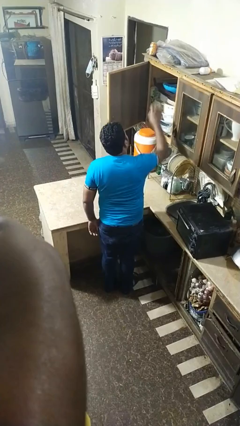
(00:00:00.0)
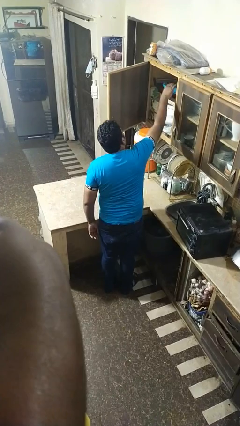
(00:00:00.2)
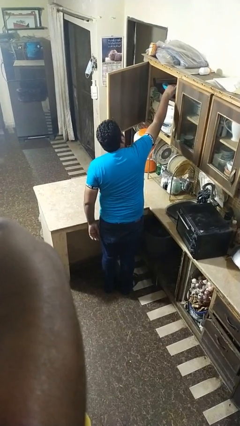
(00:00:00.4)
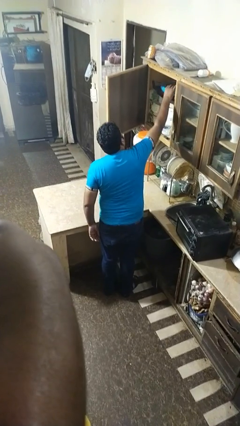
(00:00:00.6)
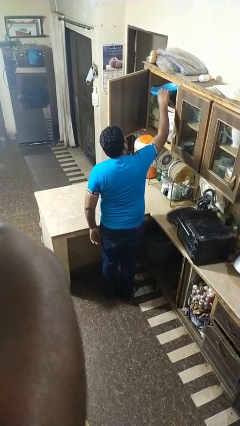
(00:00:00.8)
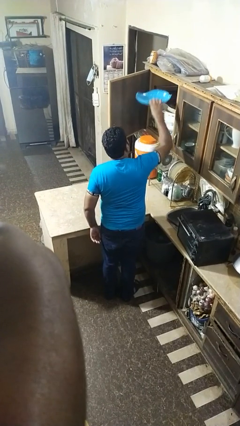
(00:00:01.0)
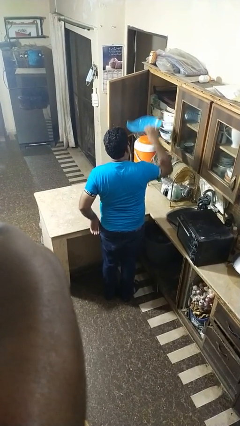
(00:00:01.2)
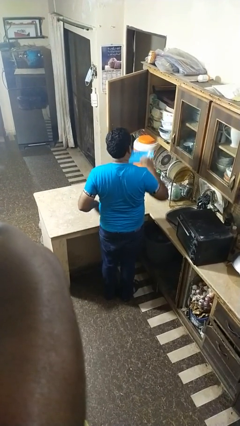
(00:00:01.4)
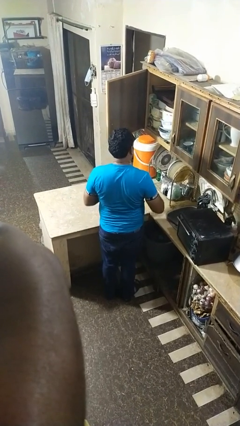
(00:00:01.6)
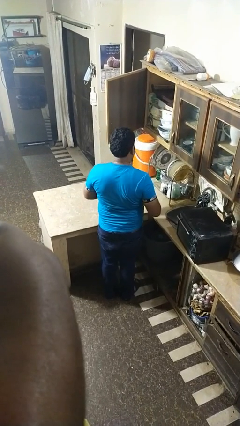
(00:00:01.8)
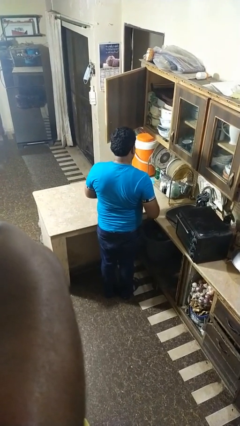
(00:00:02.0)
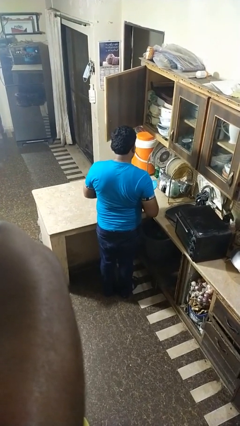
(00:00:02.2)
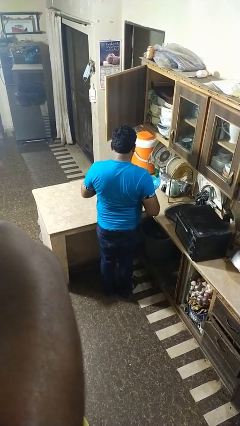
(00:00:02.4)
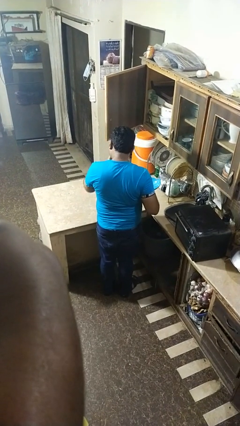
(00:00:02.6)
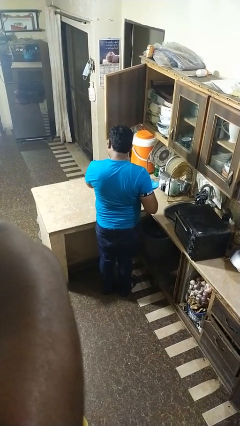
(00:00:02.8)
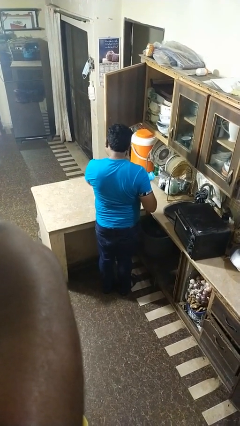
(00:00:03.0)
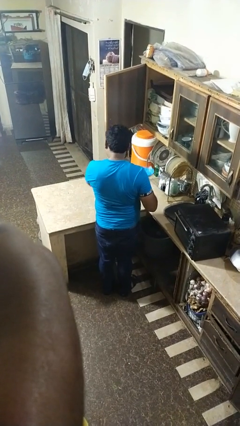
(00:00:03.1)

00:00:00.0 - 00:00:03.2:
person puts object in cabinet

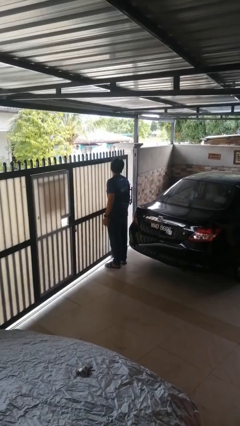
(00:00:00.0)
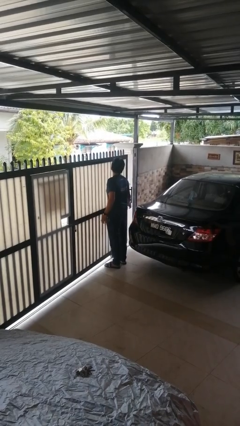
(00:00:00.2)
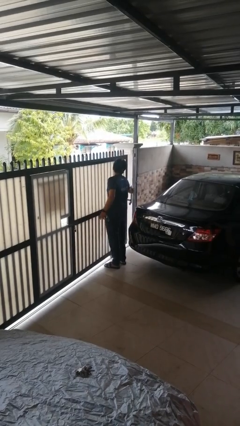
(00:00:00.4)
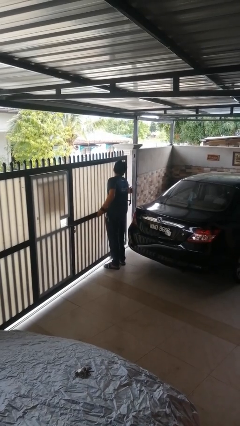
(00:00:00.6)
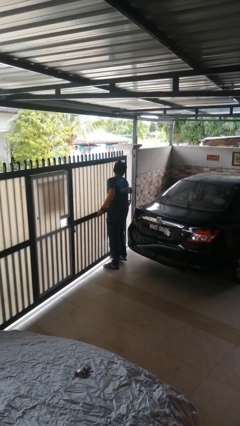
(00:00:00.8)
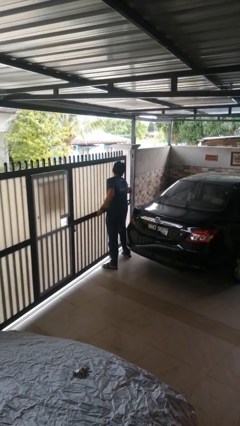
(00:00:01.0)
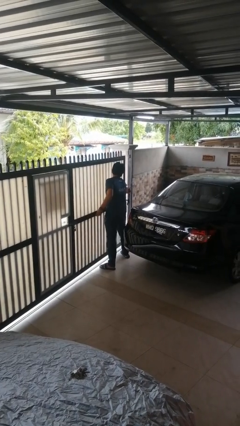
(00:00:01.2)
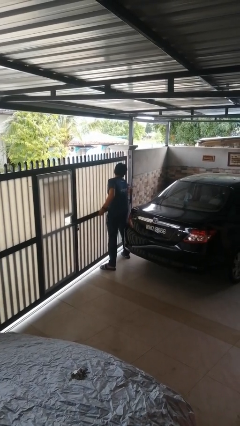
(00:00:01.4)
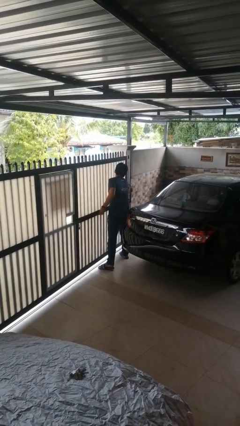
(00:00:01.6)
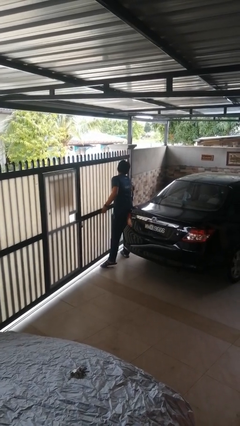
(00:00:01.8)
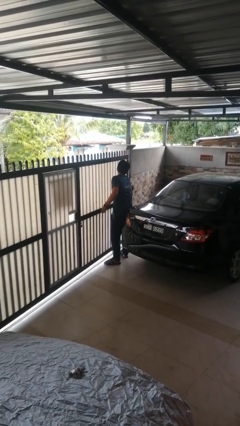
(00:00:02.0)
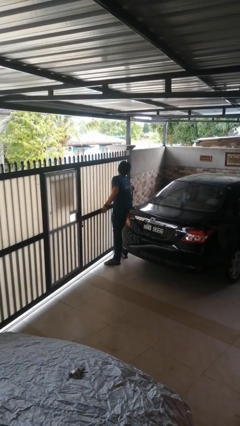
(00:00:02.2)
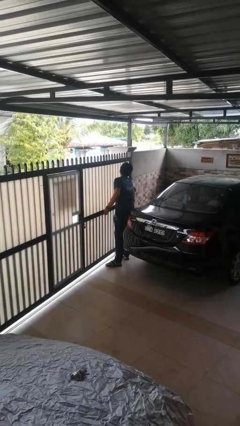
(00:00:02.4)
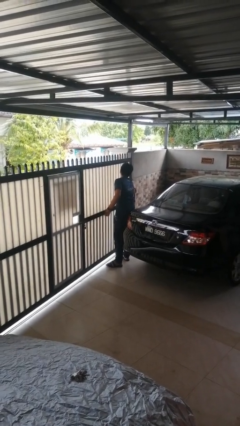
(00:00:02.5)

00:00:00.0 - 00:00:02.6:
person closes sliding door

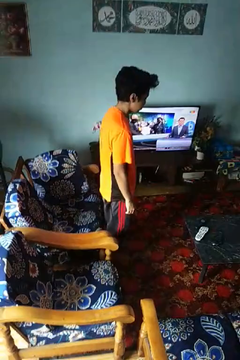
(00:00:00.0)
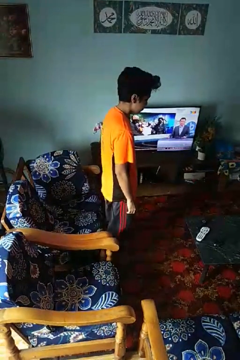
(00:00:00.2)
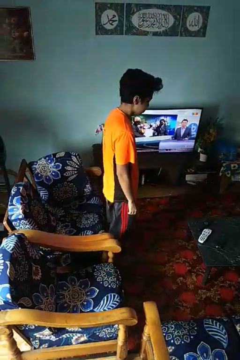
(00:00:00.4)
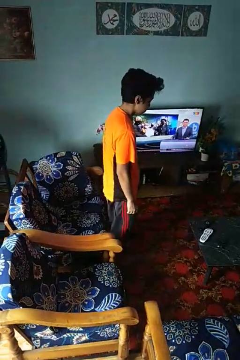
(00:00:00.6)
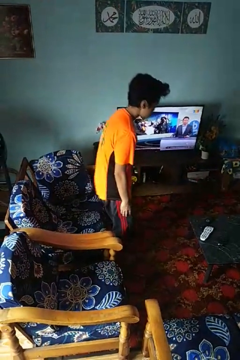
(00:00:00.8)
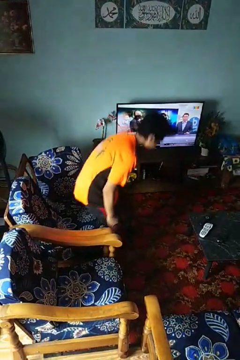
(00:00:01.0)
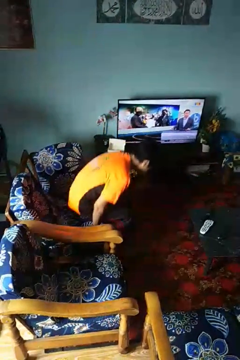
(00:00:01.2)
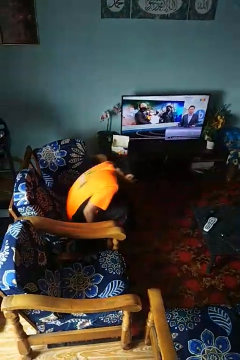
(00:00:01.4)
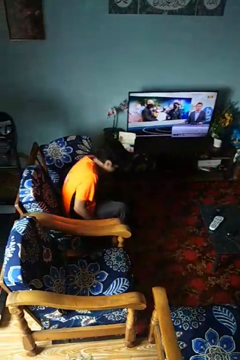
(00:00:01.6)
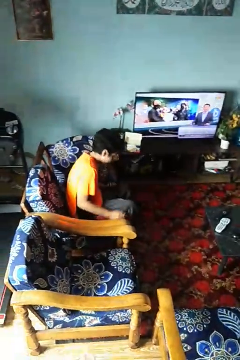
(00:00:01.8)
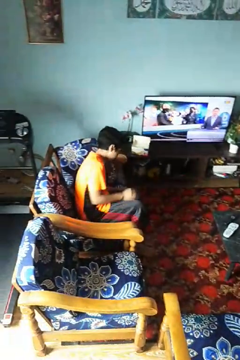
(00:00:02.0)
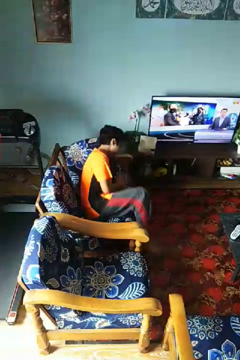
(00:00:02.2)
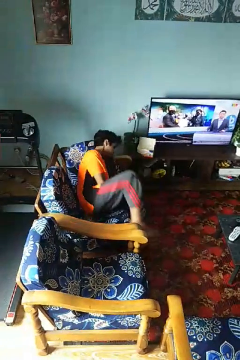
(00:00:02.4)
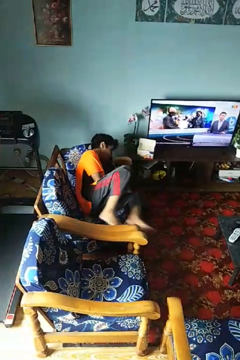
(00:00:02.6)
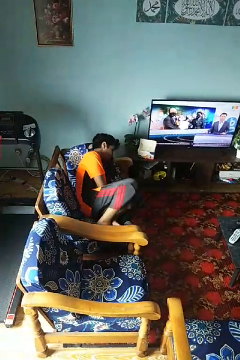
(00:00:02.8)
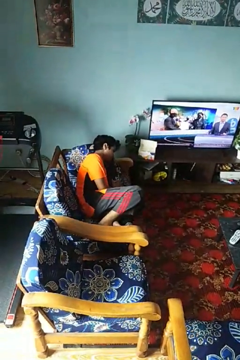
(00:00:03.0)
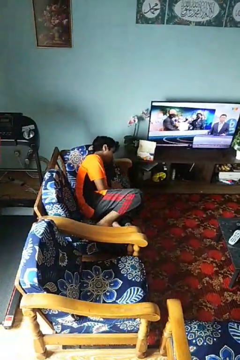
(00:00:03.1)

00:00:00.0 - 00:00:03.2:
person lies down on couch

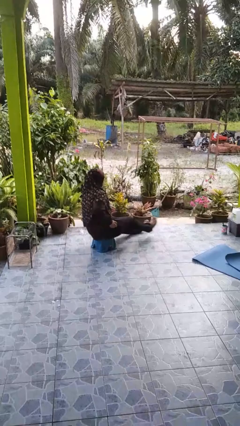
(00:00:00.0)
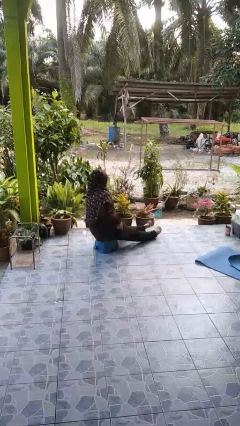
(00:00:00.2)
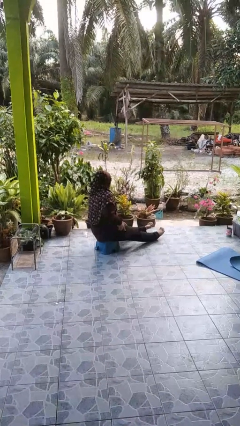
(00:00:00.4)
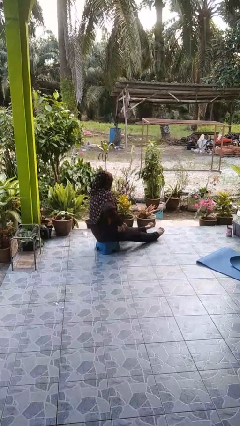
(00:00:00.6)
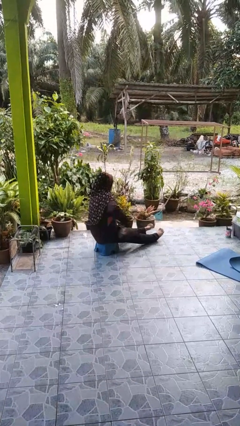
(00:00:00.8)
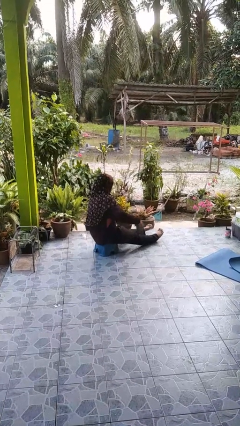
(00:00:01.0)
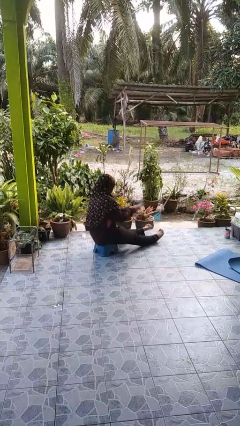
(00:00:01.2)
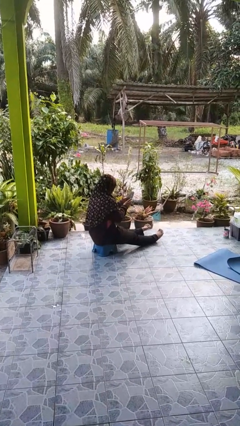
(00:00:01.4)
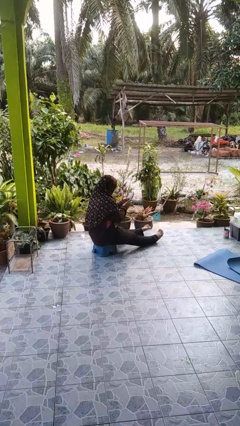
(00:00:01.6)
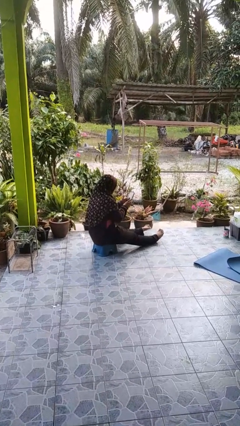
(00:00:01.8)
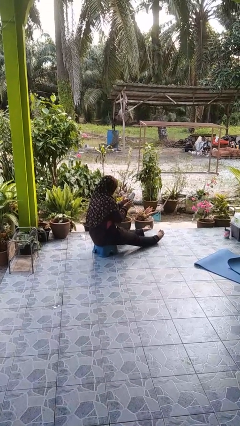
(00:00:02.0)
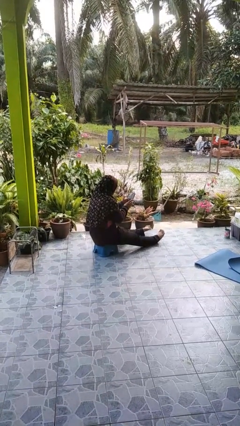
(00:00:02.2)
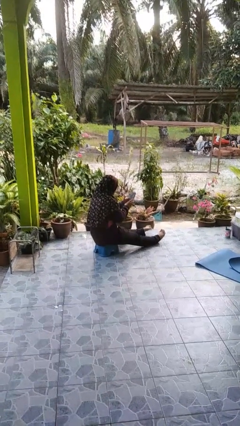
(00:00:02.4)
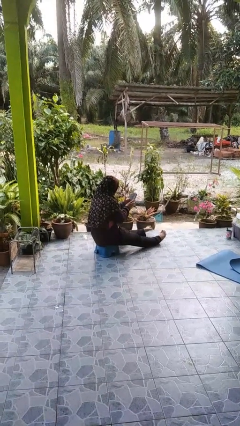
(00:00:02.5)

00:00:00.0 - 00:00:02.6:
person takes phone from pocket

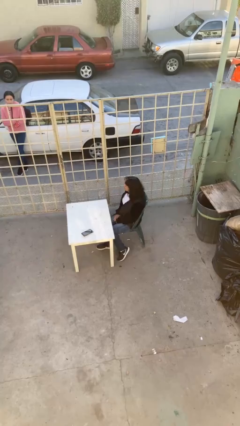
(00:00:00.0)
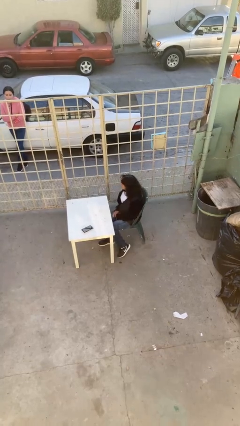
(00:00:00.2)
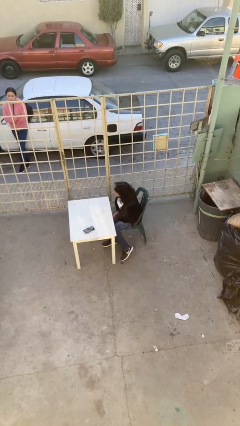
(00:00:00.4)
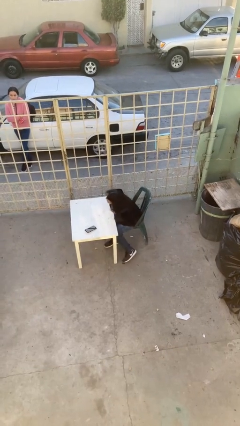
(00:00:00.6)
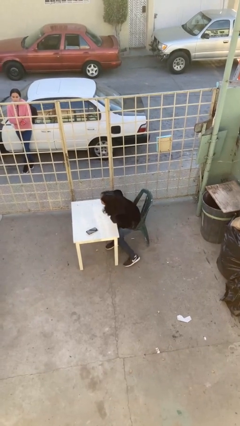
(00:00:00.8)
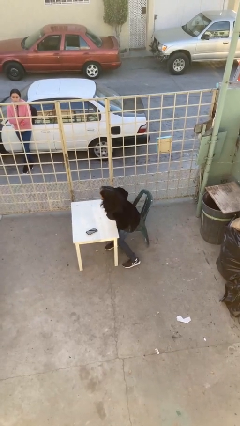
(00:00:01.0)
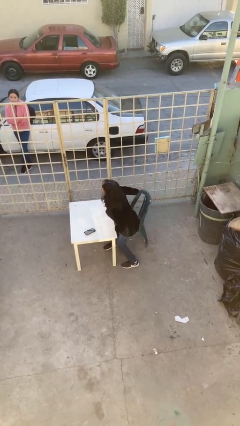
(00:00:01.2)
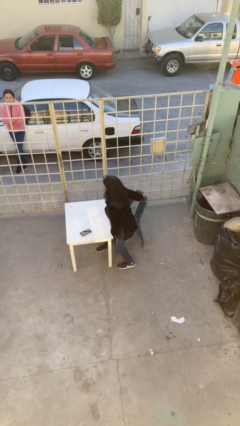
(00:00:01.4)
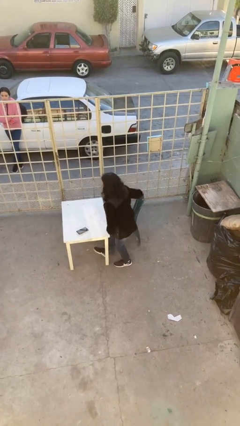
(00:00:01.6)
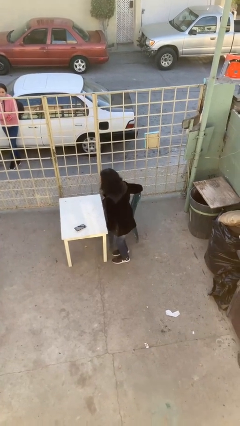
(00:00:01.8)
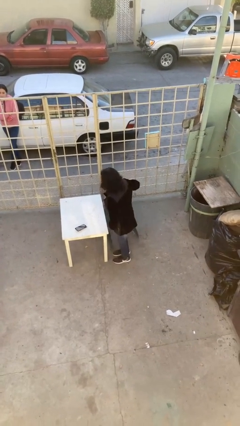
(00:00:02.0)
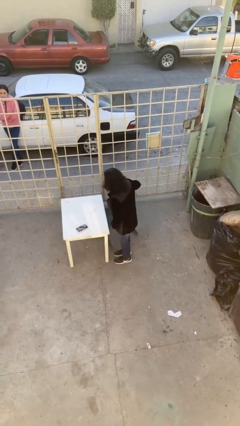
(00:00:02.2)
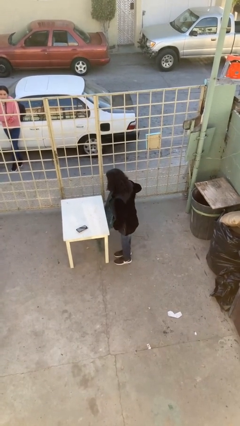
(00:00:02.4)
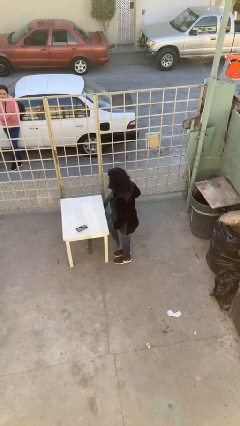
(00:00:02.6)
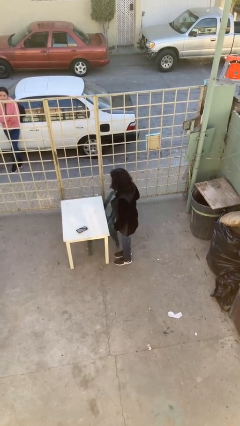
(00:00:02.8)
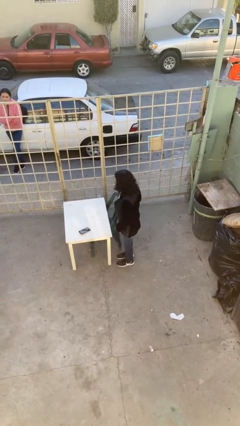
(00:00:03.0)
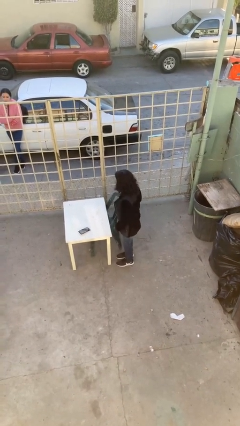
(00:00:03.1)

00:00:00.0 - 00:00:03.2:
person stands up

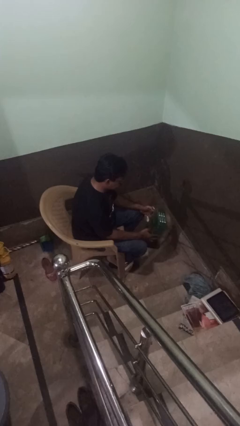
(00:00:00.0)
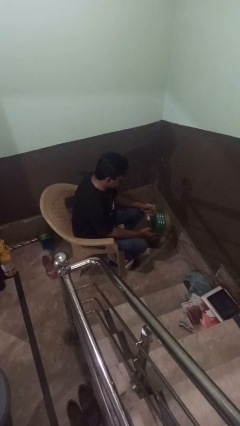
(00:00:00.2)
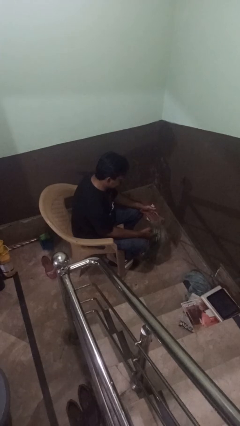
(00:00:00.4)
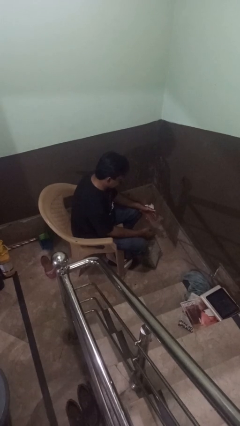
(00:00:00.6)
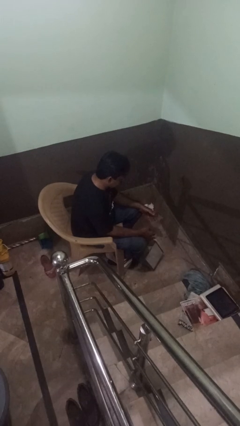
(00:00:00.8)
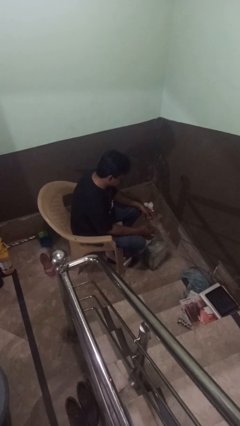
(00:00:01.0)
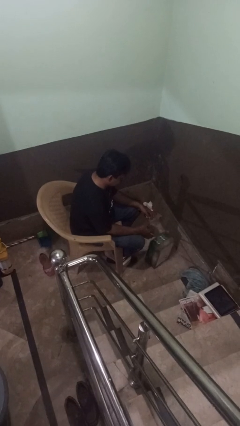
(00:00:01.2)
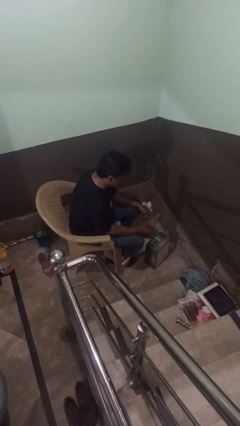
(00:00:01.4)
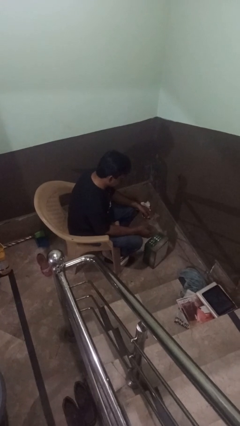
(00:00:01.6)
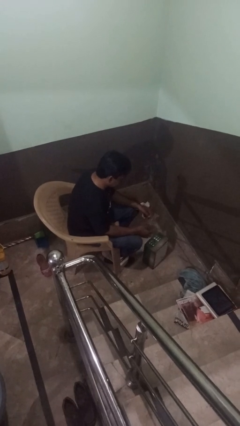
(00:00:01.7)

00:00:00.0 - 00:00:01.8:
person drops object

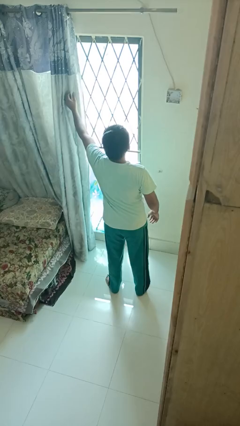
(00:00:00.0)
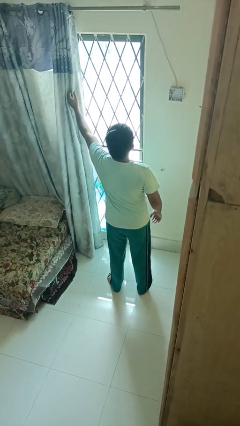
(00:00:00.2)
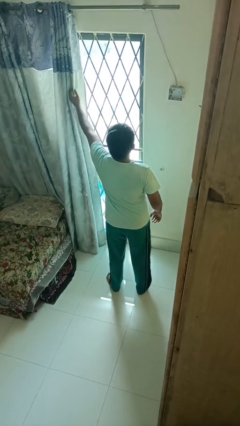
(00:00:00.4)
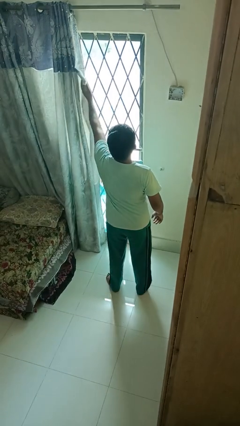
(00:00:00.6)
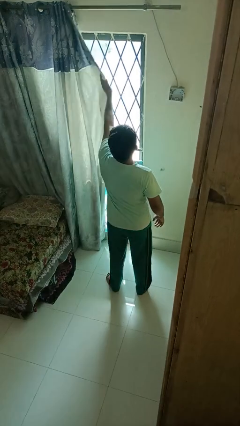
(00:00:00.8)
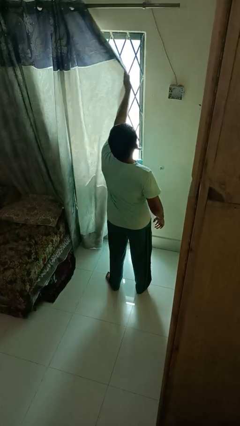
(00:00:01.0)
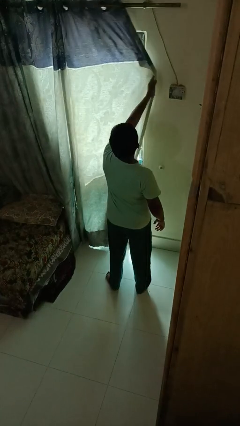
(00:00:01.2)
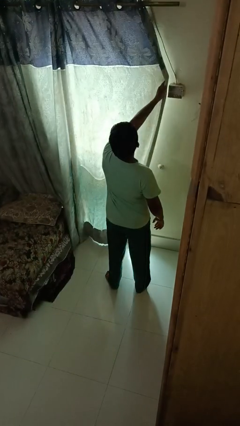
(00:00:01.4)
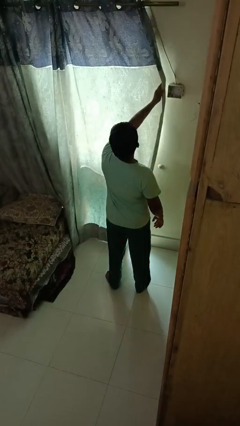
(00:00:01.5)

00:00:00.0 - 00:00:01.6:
person closes curtains
